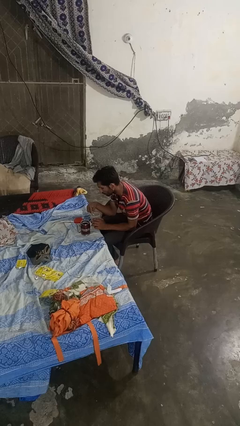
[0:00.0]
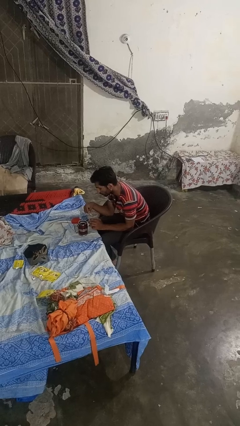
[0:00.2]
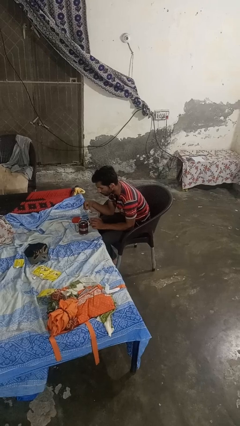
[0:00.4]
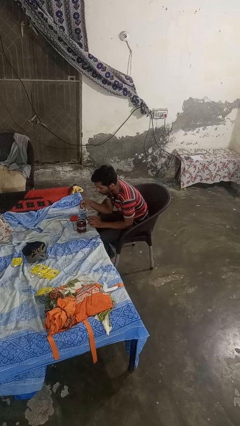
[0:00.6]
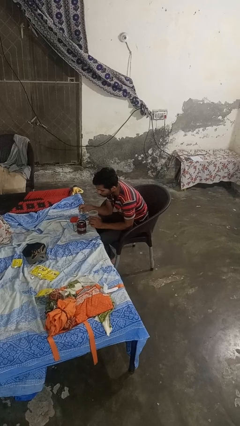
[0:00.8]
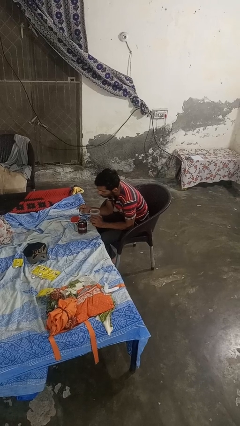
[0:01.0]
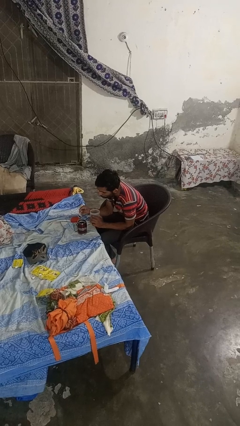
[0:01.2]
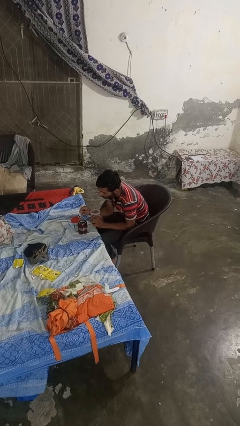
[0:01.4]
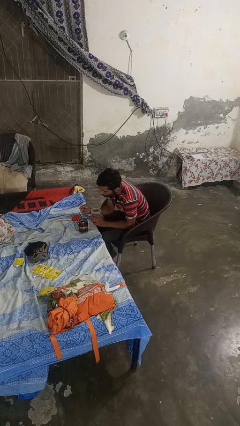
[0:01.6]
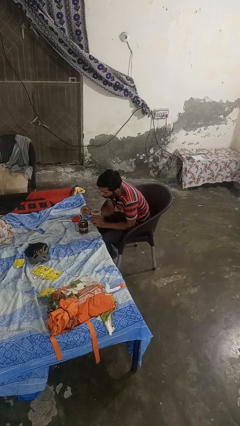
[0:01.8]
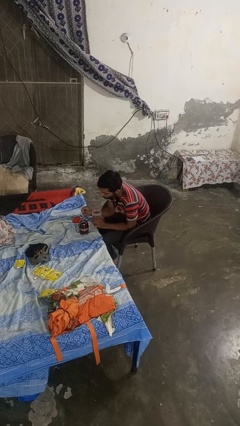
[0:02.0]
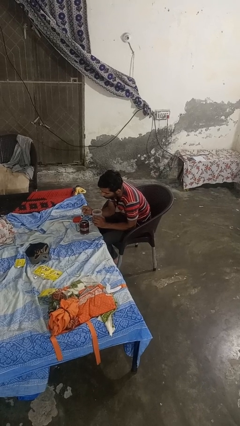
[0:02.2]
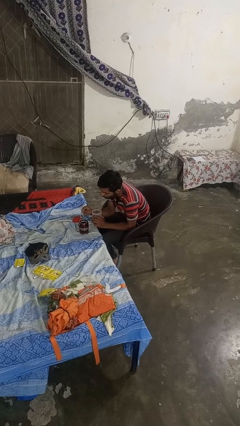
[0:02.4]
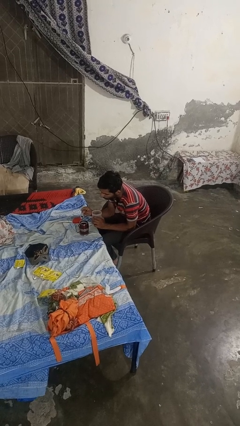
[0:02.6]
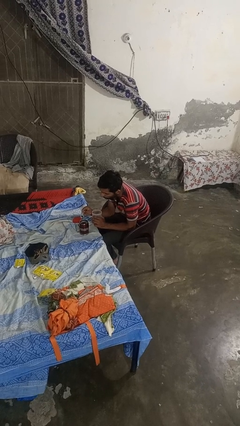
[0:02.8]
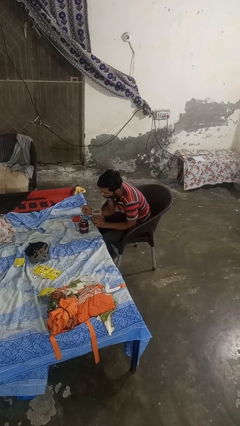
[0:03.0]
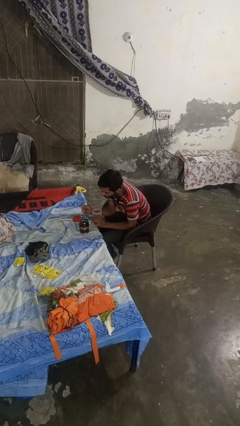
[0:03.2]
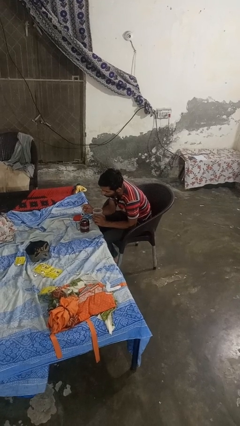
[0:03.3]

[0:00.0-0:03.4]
person pours coffee into mug

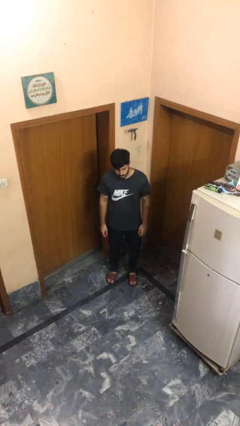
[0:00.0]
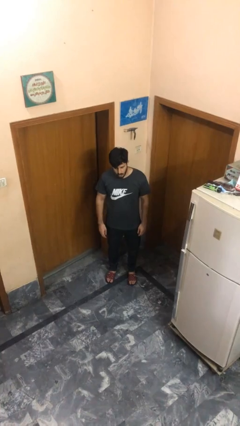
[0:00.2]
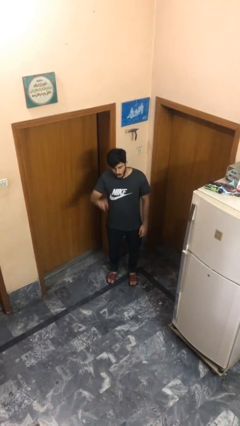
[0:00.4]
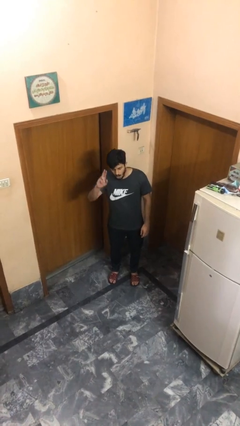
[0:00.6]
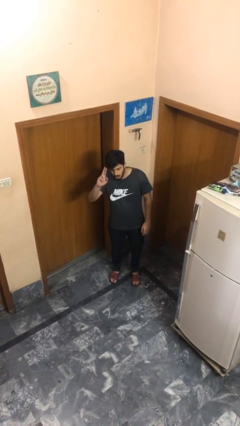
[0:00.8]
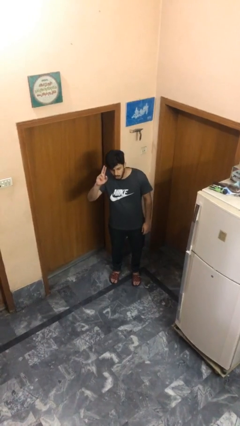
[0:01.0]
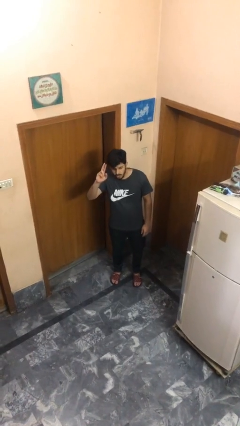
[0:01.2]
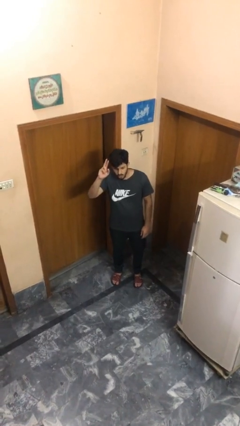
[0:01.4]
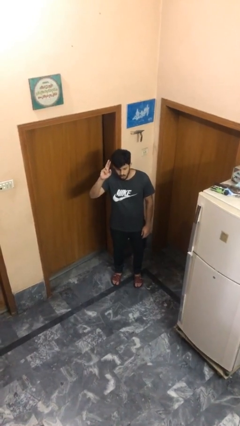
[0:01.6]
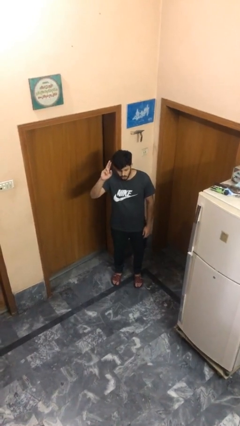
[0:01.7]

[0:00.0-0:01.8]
person gestures raise hand

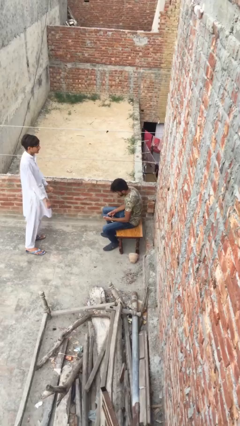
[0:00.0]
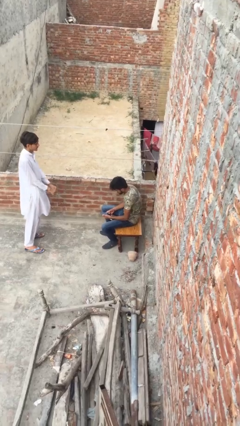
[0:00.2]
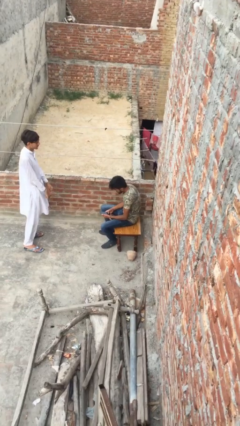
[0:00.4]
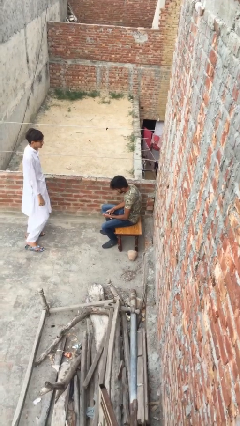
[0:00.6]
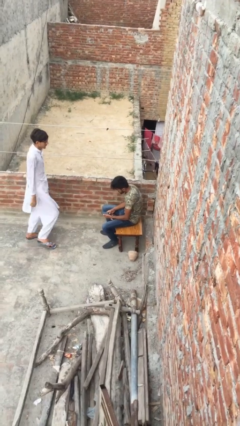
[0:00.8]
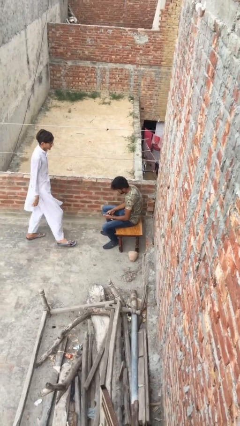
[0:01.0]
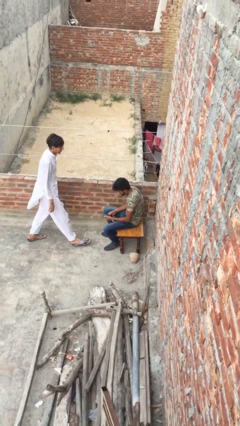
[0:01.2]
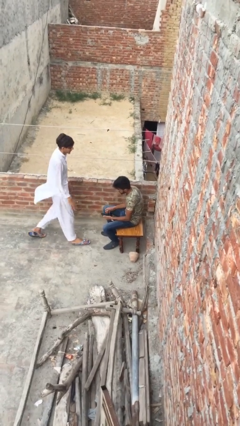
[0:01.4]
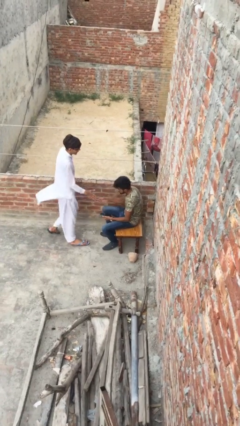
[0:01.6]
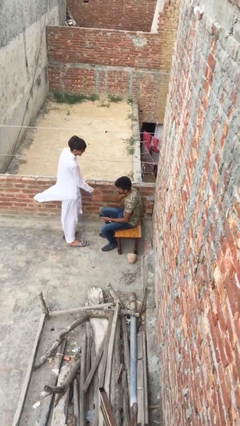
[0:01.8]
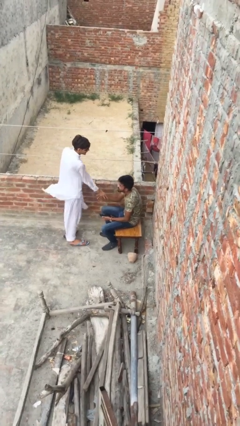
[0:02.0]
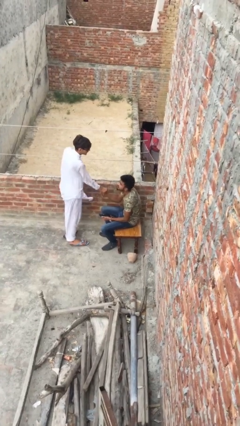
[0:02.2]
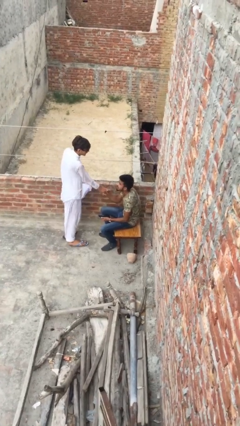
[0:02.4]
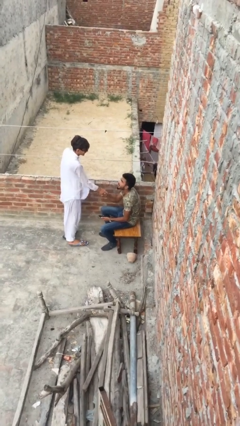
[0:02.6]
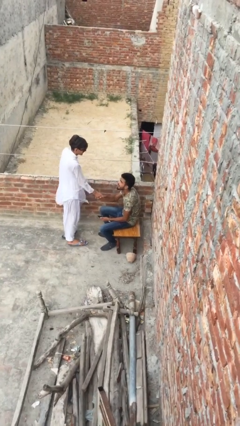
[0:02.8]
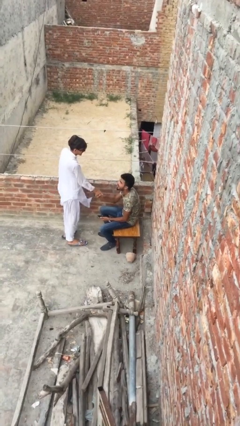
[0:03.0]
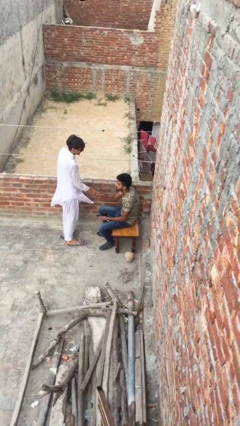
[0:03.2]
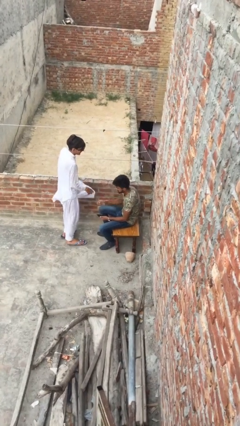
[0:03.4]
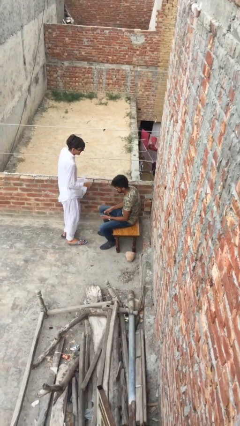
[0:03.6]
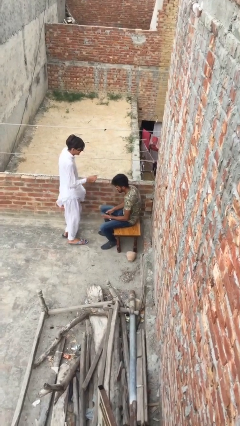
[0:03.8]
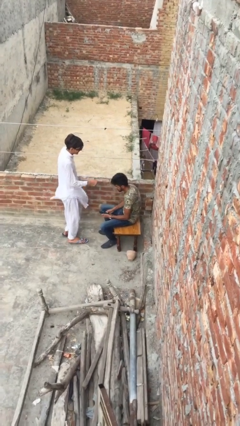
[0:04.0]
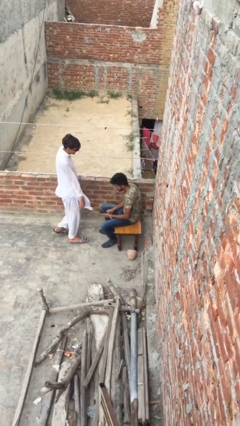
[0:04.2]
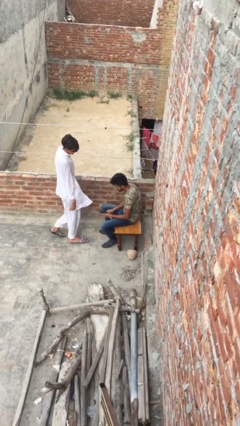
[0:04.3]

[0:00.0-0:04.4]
person shakes hand

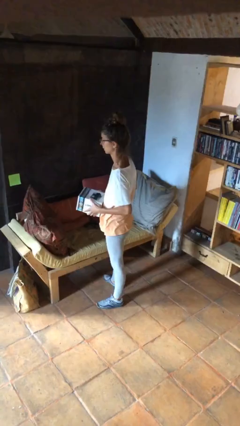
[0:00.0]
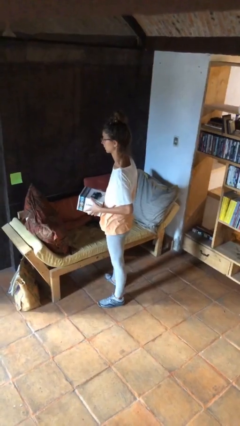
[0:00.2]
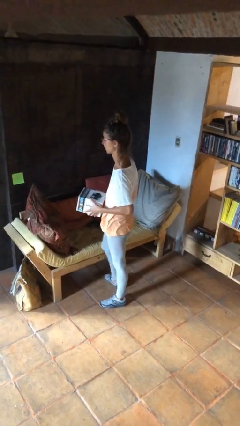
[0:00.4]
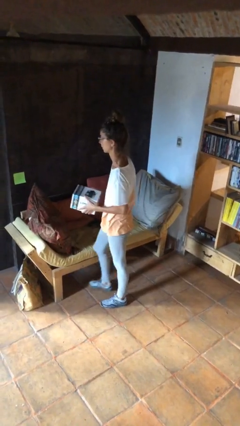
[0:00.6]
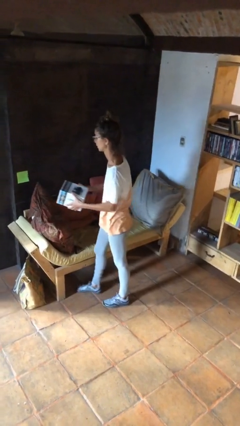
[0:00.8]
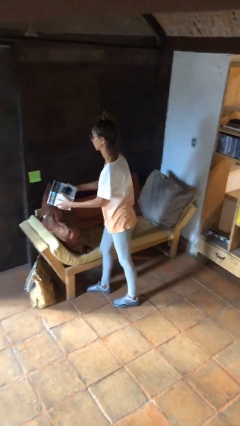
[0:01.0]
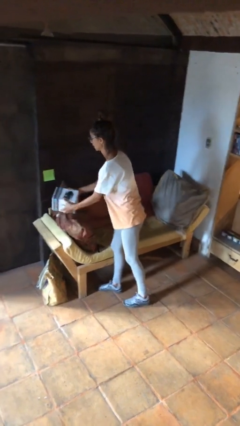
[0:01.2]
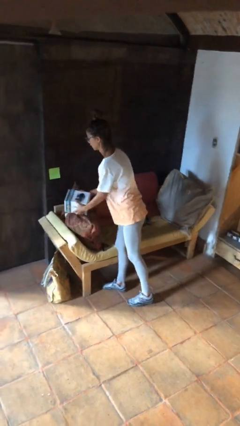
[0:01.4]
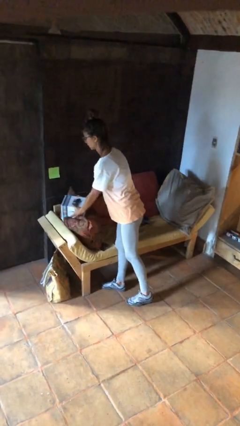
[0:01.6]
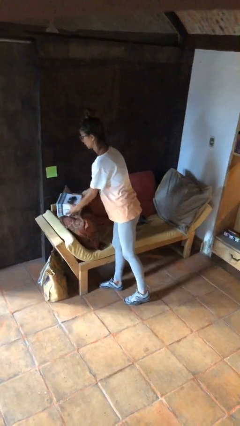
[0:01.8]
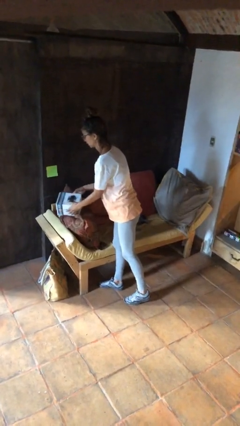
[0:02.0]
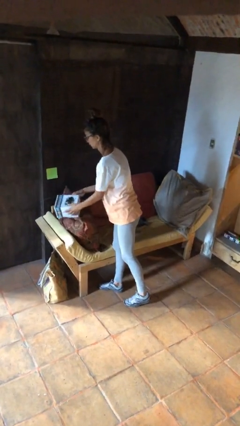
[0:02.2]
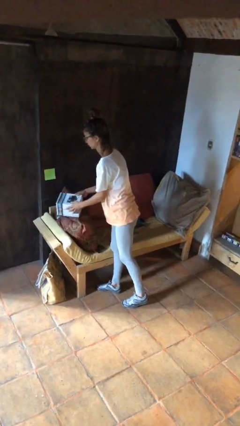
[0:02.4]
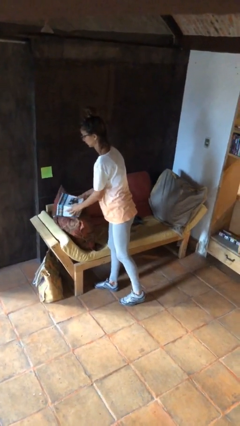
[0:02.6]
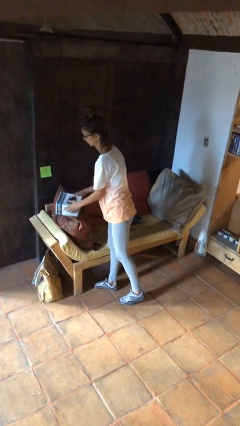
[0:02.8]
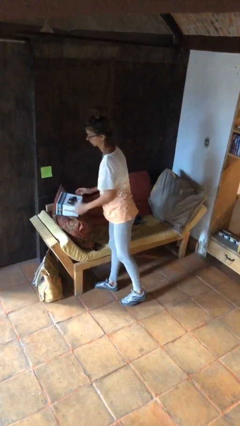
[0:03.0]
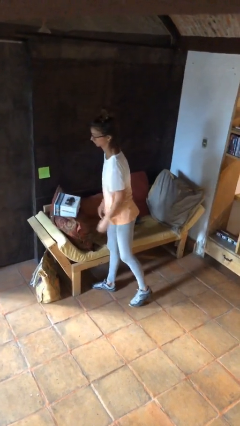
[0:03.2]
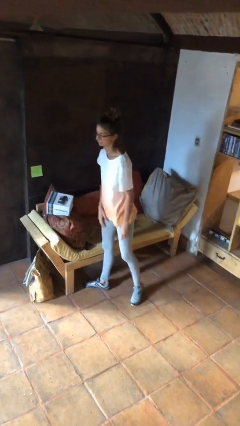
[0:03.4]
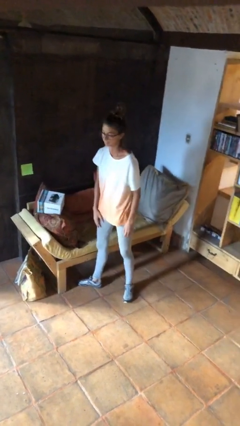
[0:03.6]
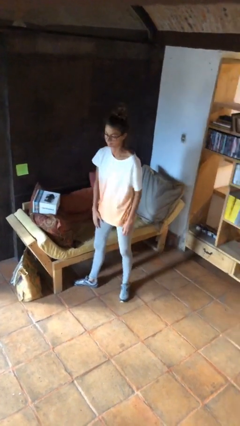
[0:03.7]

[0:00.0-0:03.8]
person puts down object on couch

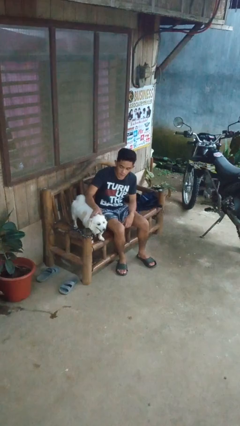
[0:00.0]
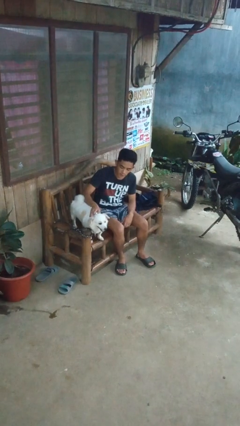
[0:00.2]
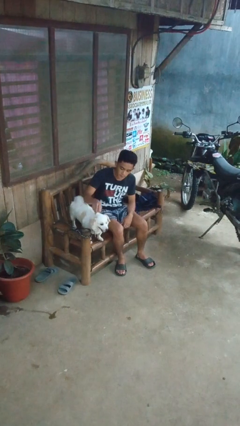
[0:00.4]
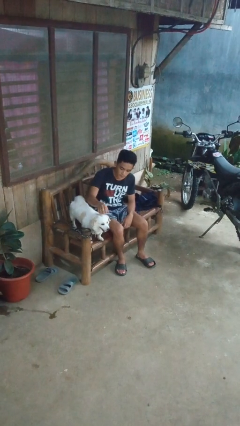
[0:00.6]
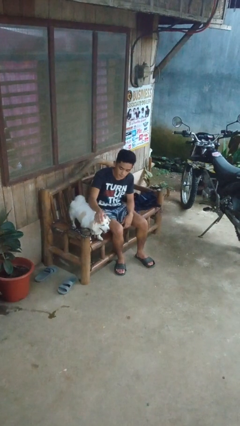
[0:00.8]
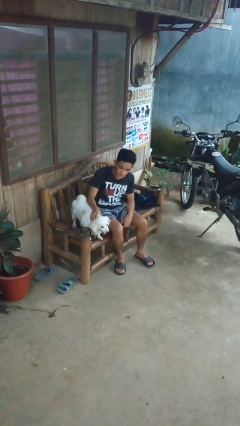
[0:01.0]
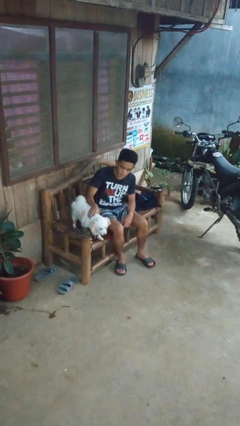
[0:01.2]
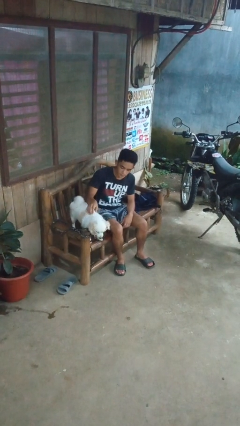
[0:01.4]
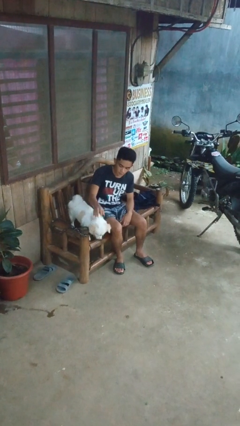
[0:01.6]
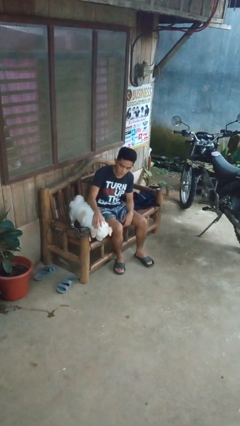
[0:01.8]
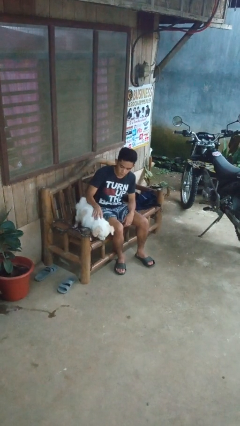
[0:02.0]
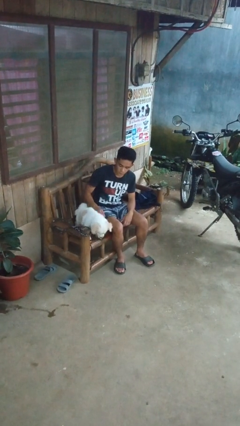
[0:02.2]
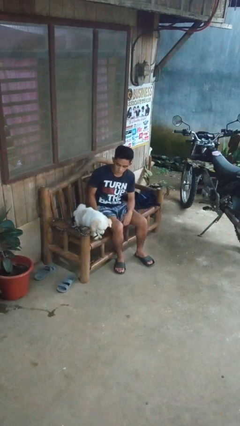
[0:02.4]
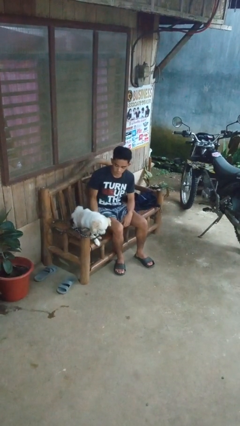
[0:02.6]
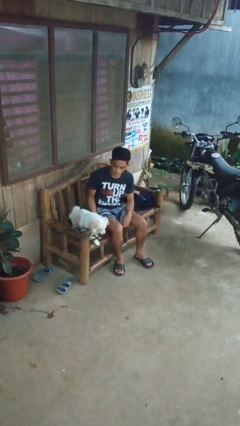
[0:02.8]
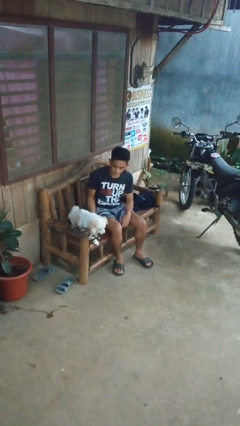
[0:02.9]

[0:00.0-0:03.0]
person pets dog

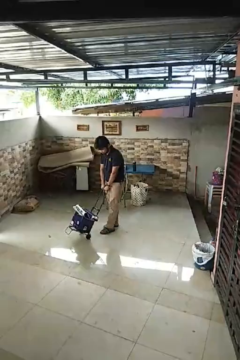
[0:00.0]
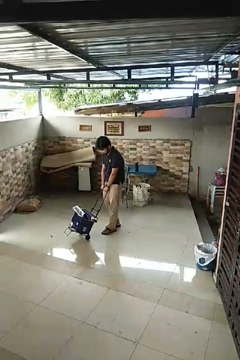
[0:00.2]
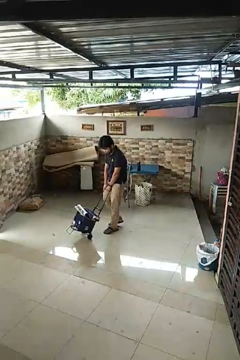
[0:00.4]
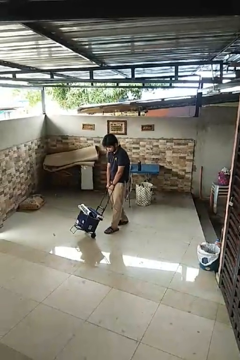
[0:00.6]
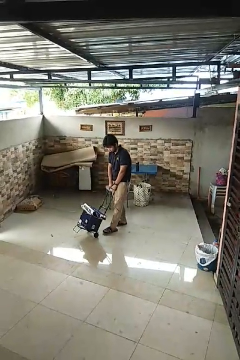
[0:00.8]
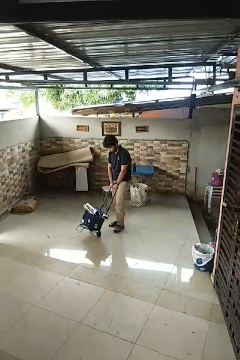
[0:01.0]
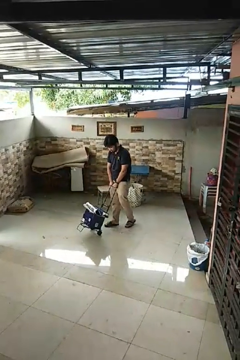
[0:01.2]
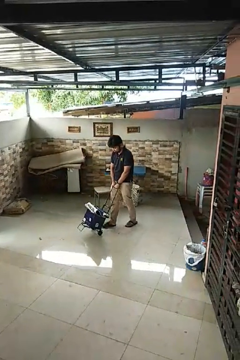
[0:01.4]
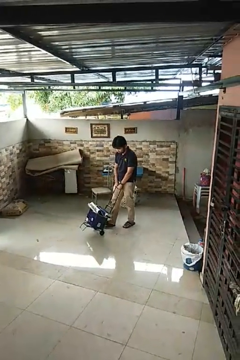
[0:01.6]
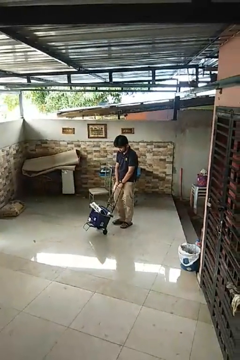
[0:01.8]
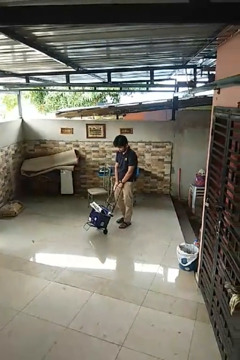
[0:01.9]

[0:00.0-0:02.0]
person pulls wheeled cart
